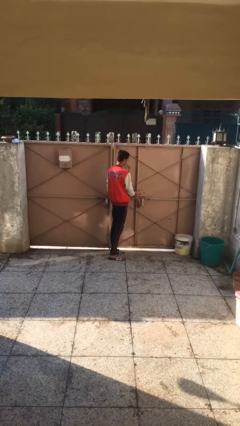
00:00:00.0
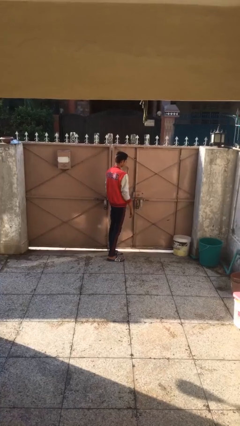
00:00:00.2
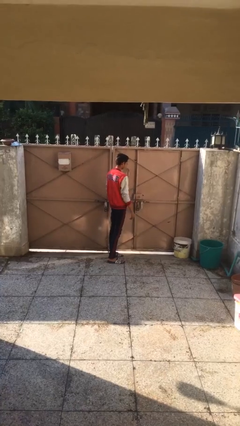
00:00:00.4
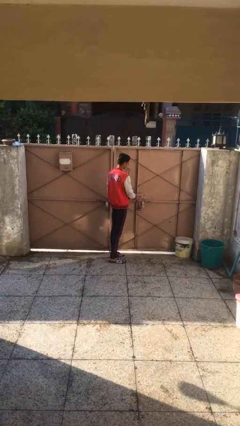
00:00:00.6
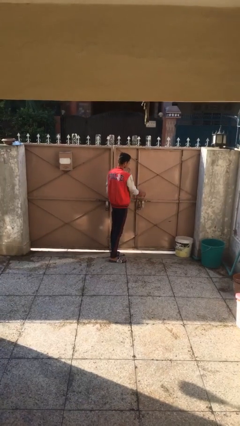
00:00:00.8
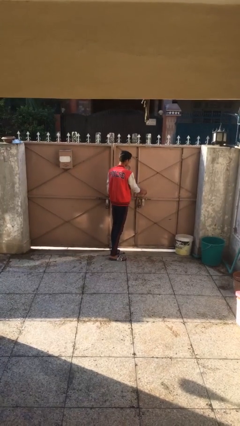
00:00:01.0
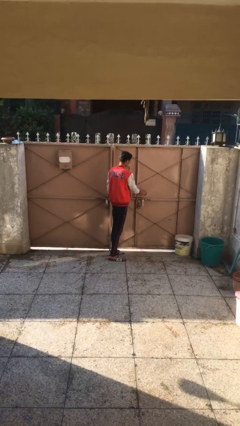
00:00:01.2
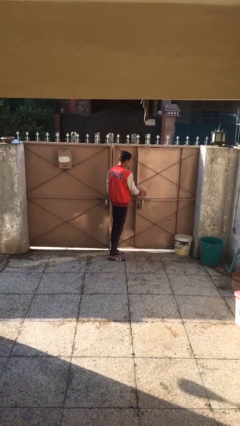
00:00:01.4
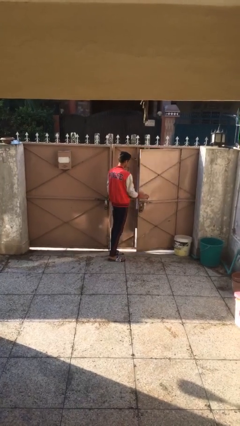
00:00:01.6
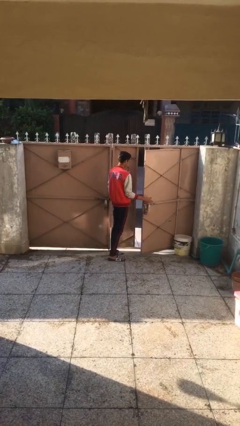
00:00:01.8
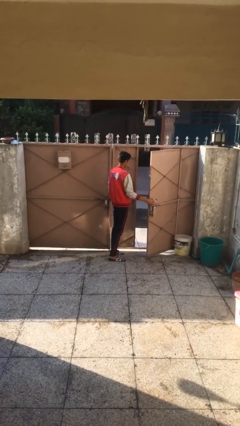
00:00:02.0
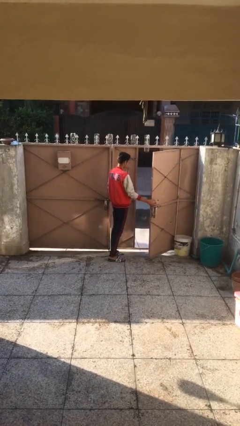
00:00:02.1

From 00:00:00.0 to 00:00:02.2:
person opens facility door

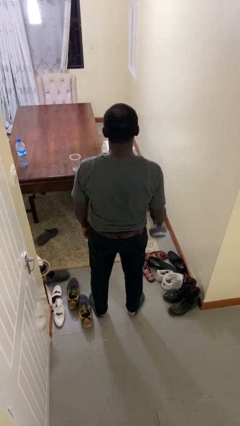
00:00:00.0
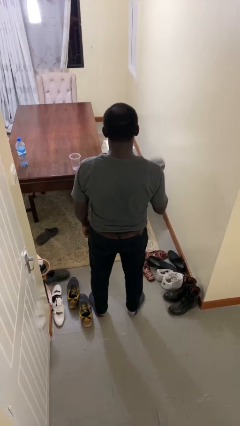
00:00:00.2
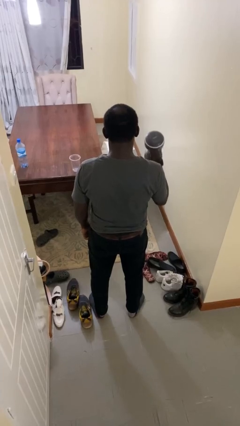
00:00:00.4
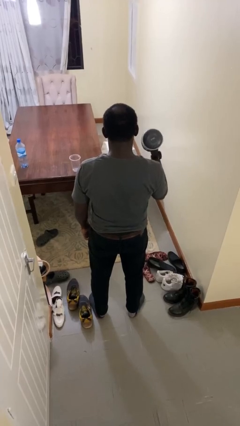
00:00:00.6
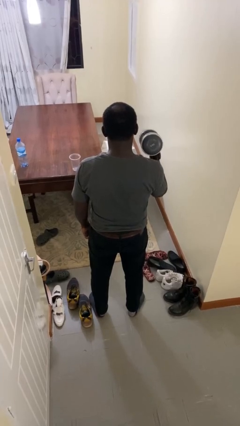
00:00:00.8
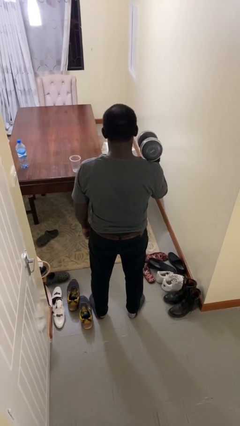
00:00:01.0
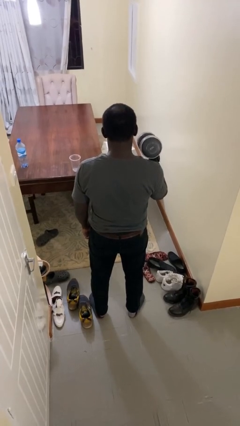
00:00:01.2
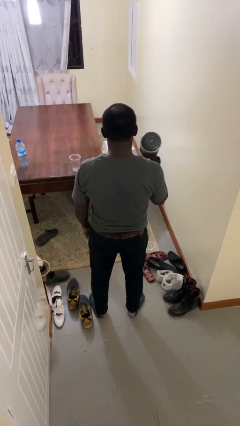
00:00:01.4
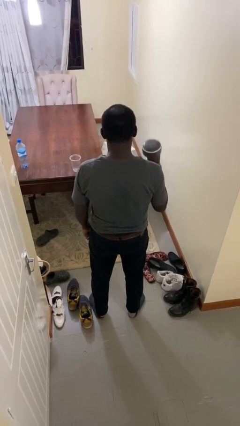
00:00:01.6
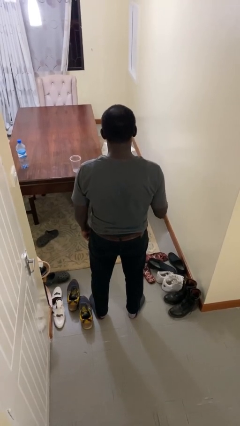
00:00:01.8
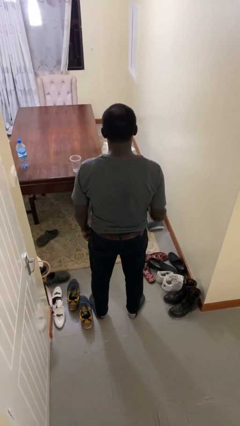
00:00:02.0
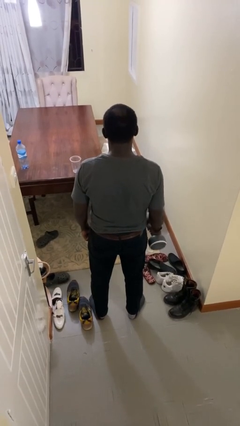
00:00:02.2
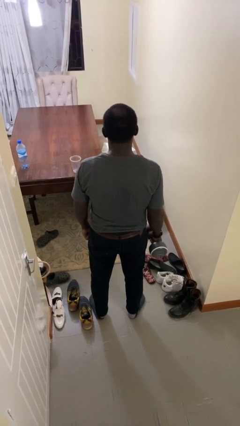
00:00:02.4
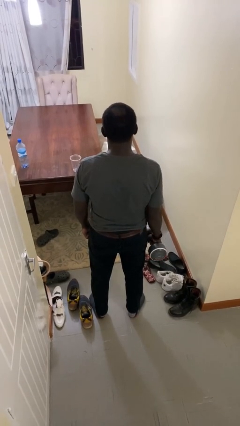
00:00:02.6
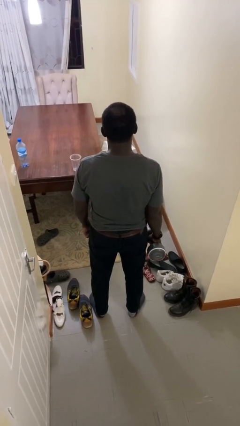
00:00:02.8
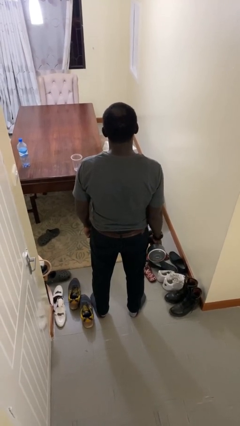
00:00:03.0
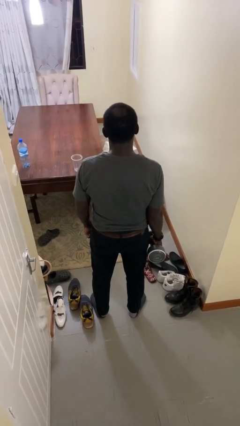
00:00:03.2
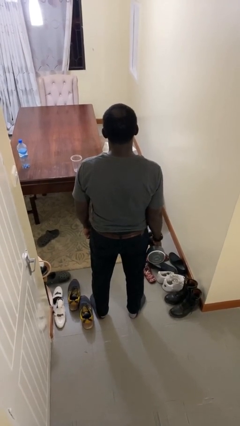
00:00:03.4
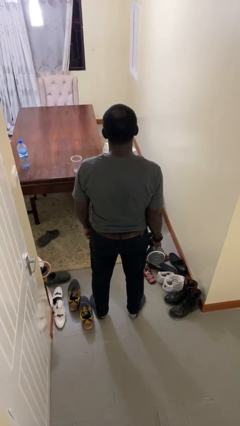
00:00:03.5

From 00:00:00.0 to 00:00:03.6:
person lifts dumbbells

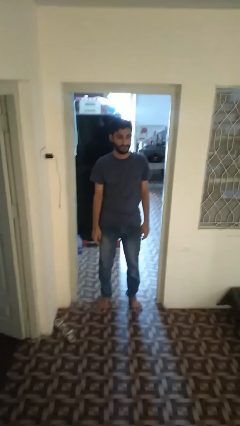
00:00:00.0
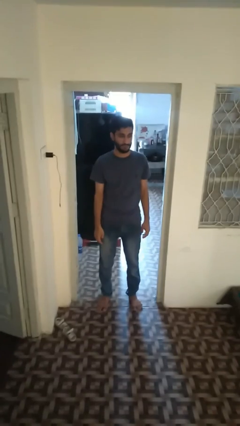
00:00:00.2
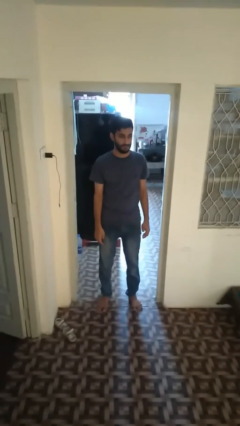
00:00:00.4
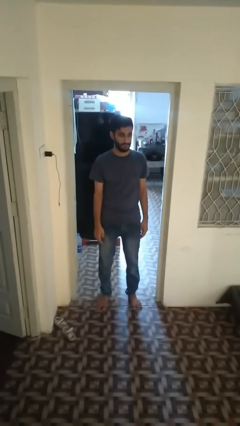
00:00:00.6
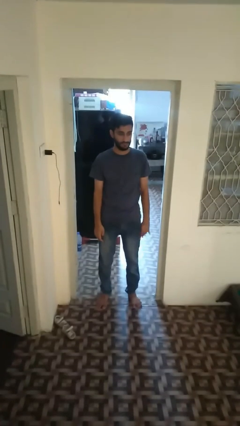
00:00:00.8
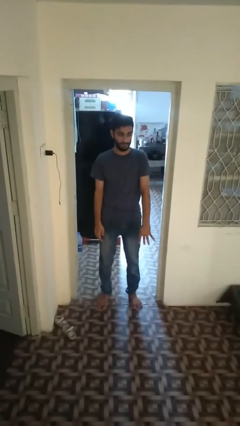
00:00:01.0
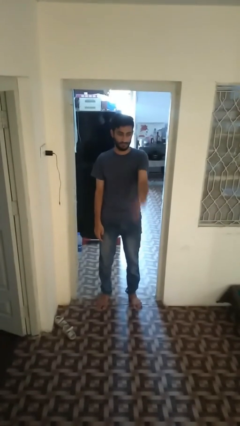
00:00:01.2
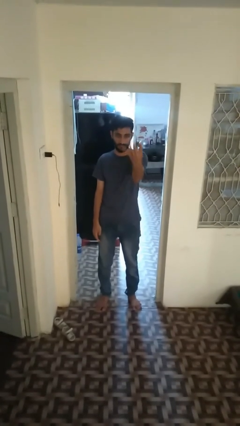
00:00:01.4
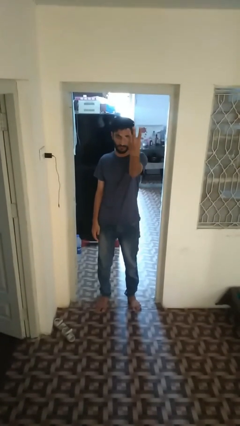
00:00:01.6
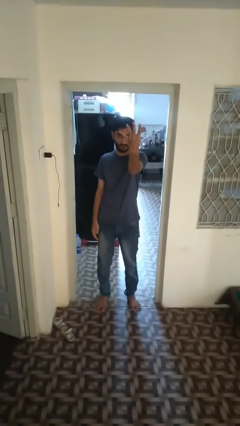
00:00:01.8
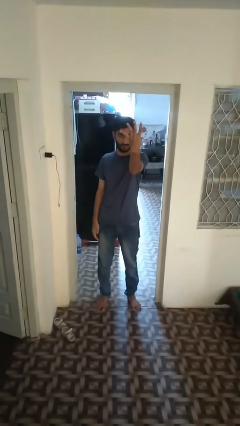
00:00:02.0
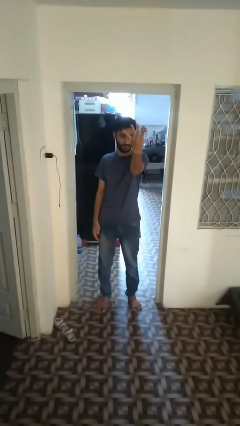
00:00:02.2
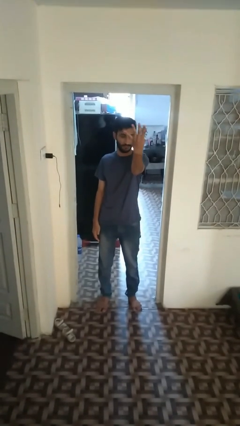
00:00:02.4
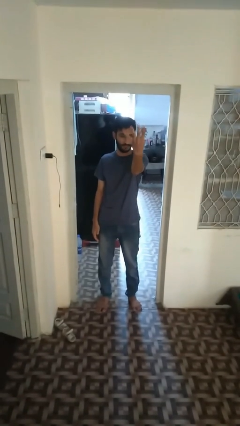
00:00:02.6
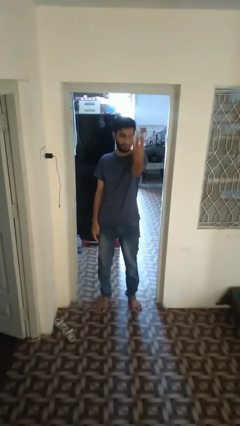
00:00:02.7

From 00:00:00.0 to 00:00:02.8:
person gestures number four

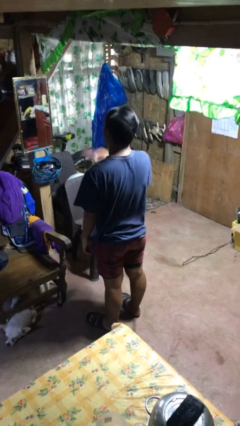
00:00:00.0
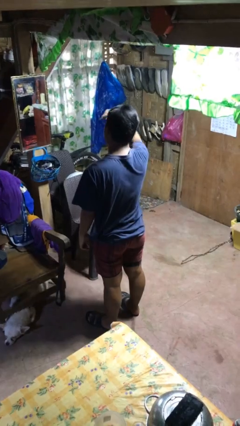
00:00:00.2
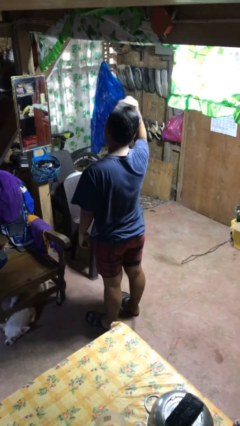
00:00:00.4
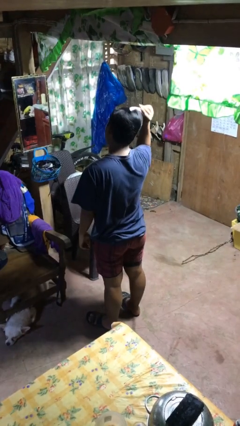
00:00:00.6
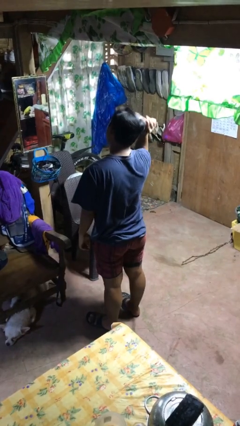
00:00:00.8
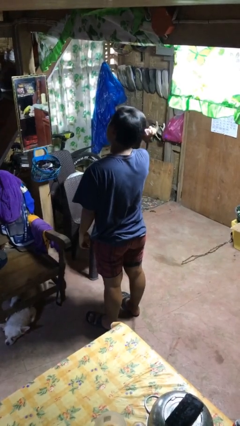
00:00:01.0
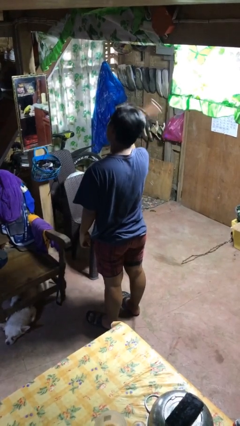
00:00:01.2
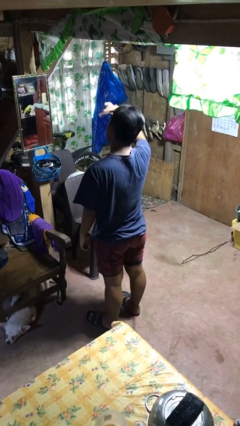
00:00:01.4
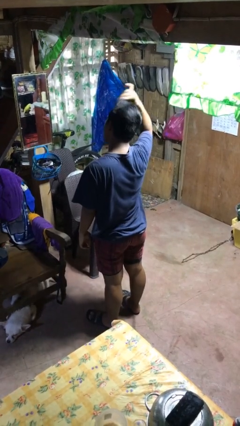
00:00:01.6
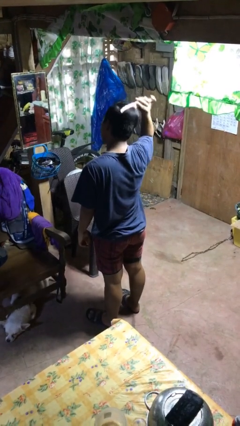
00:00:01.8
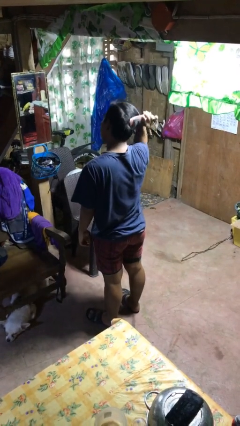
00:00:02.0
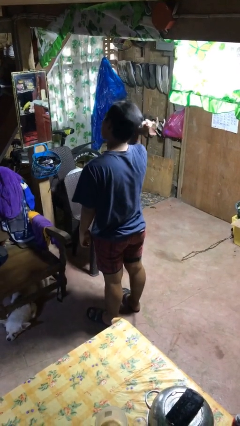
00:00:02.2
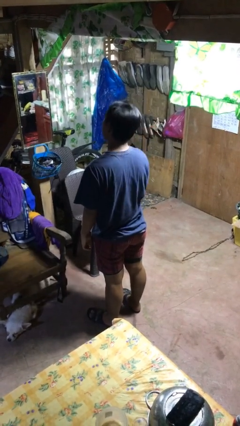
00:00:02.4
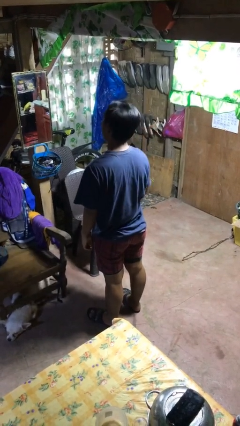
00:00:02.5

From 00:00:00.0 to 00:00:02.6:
person brushes hair

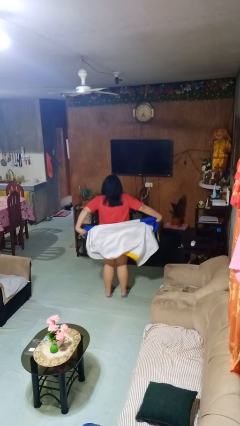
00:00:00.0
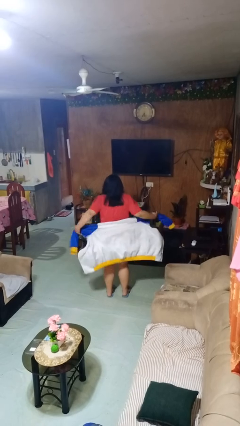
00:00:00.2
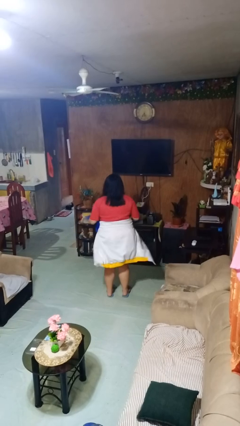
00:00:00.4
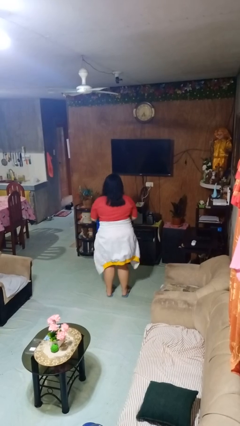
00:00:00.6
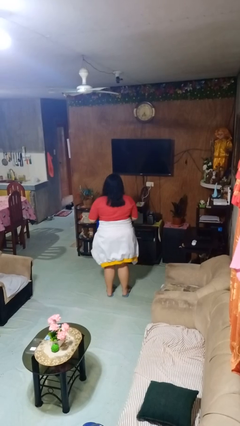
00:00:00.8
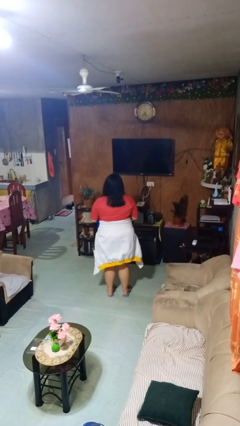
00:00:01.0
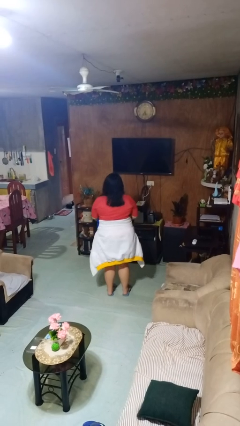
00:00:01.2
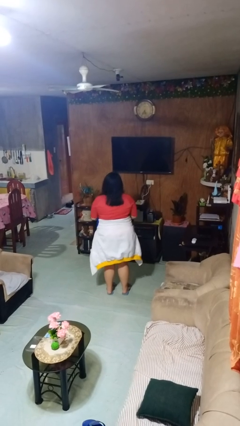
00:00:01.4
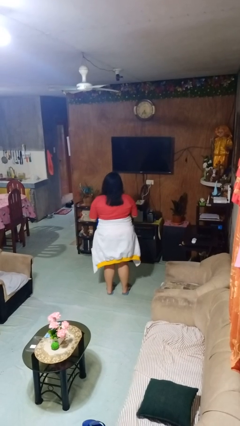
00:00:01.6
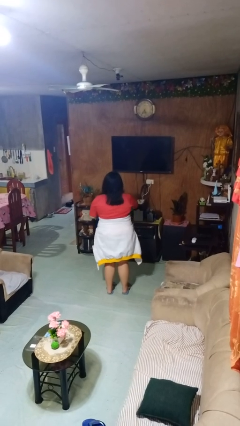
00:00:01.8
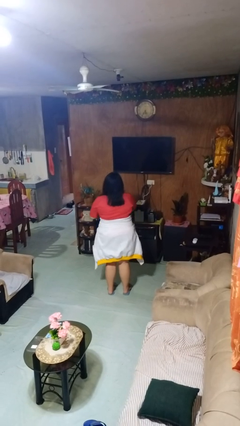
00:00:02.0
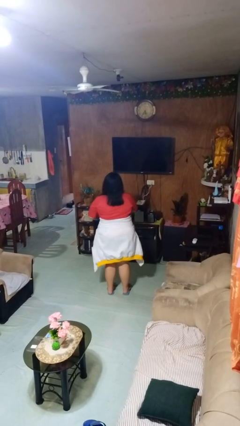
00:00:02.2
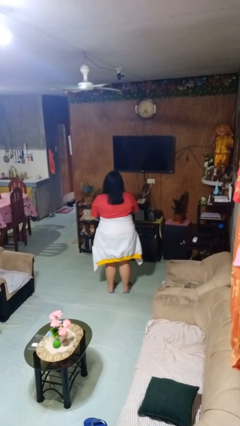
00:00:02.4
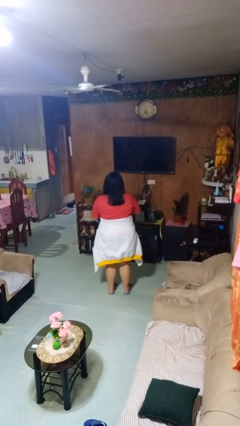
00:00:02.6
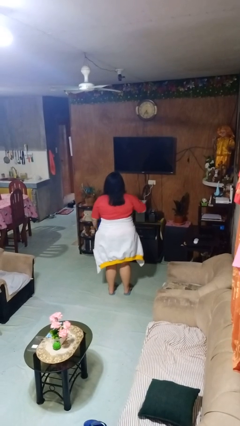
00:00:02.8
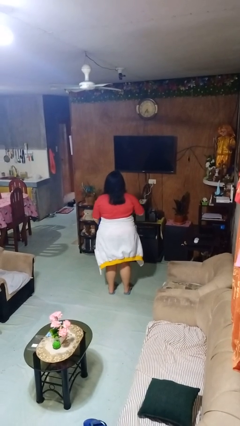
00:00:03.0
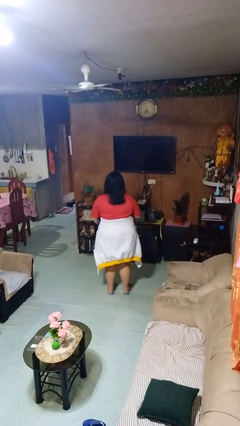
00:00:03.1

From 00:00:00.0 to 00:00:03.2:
person ties jacket around waist

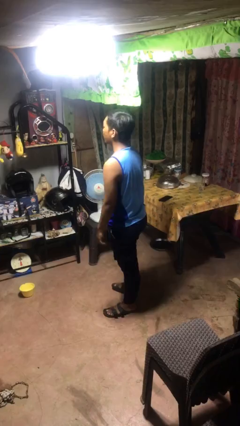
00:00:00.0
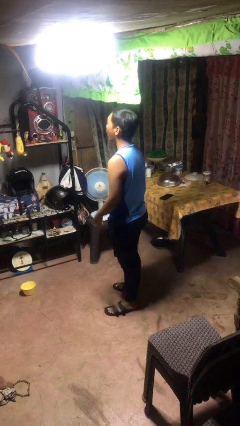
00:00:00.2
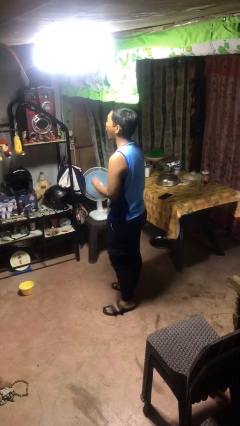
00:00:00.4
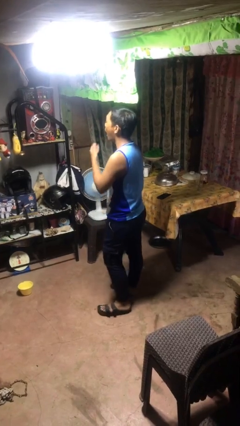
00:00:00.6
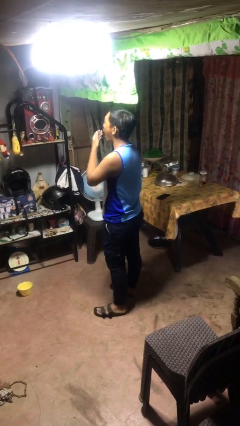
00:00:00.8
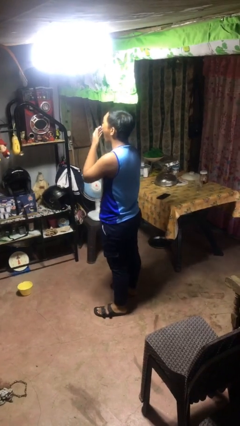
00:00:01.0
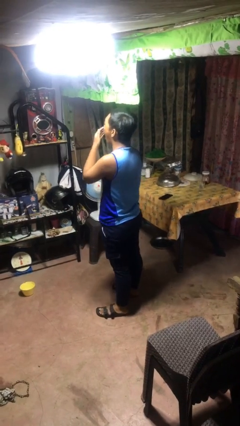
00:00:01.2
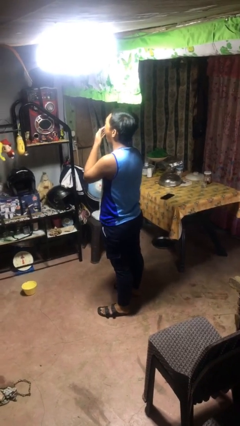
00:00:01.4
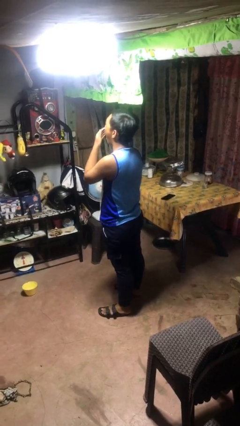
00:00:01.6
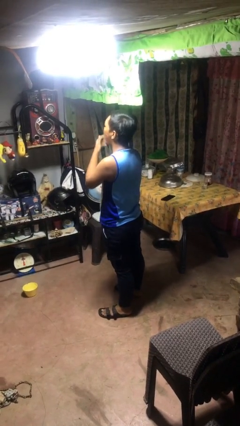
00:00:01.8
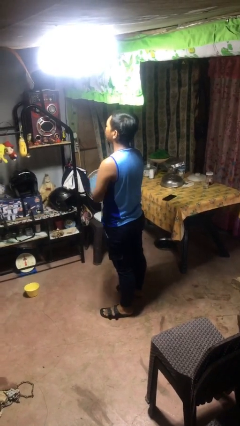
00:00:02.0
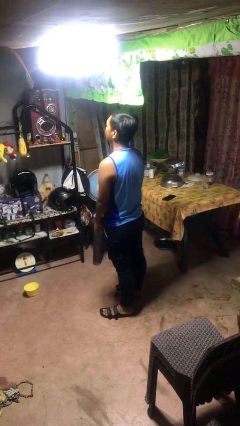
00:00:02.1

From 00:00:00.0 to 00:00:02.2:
person yawns

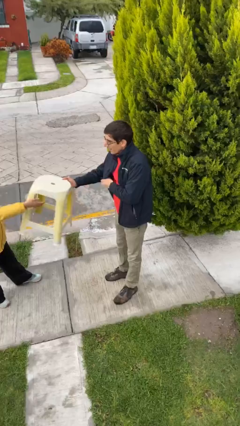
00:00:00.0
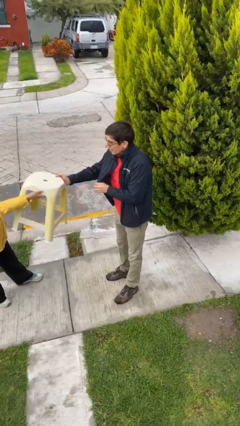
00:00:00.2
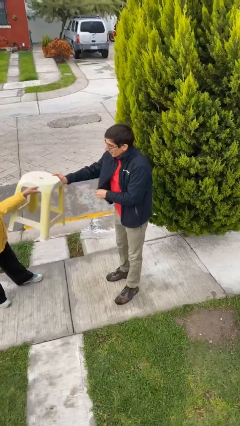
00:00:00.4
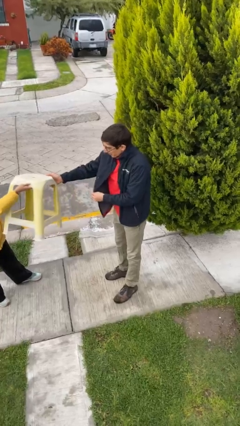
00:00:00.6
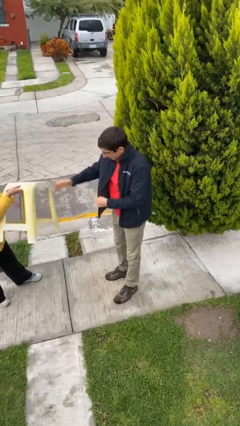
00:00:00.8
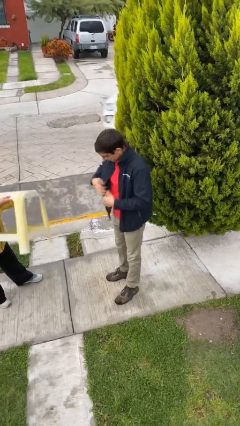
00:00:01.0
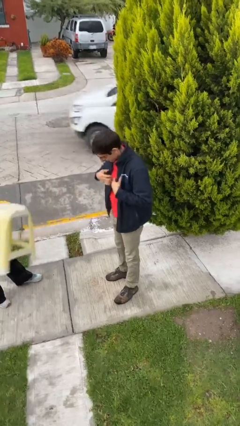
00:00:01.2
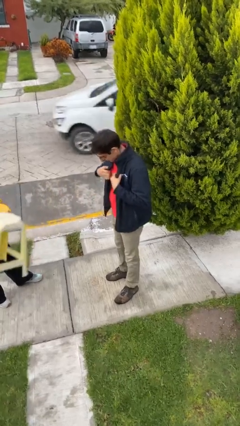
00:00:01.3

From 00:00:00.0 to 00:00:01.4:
person transfers object to person
